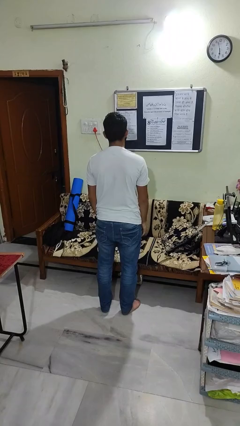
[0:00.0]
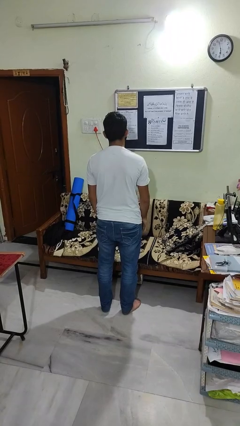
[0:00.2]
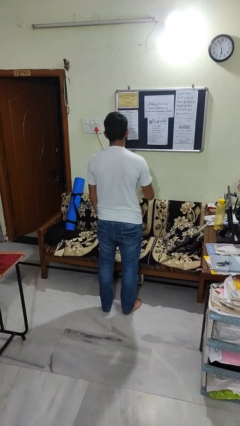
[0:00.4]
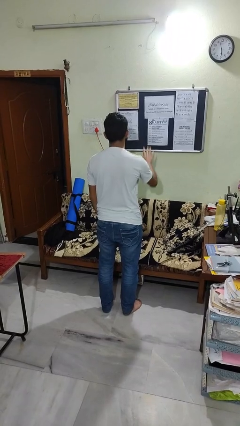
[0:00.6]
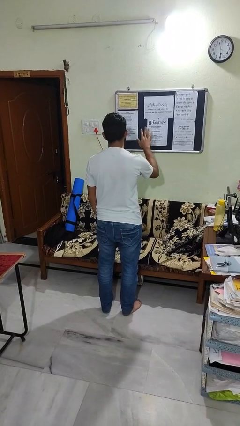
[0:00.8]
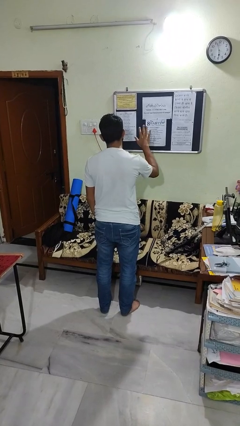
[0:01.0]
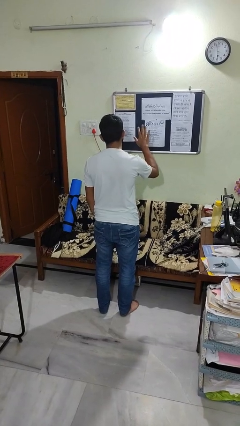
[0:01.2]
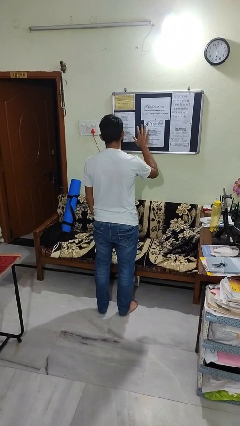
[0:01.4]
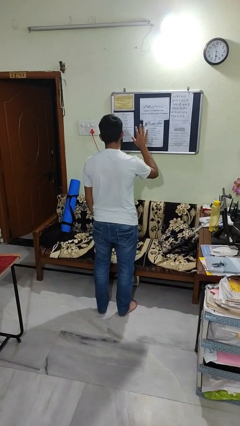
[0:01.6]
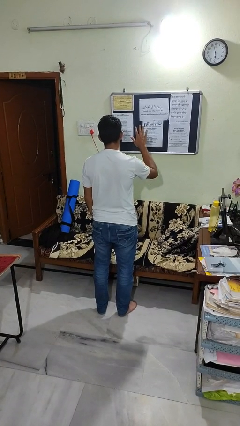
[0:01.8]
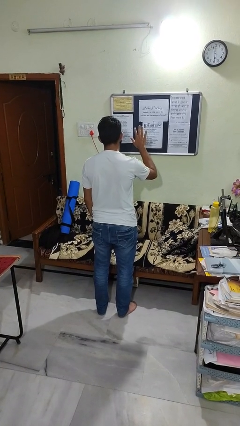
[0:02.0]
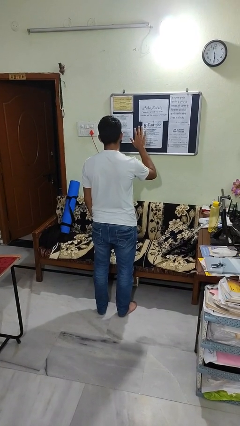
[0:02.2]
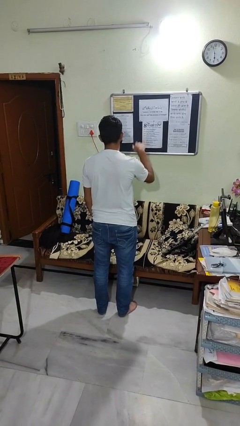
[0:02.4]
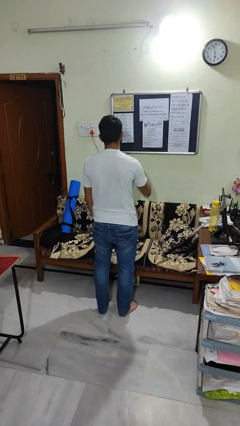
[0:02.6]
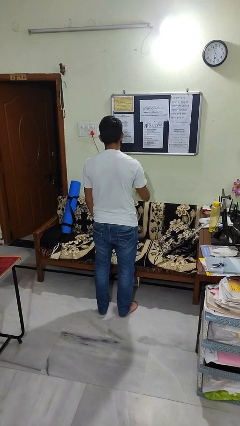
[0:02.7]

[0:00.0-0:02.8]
person gestures number five

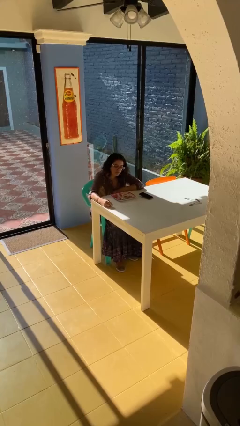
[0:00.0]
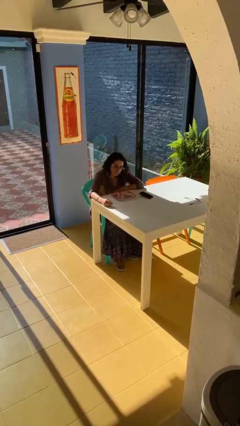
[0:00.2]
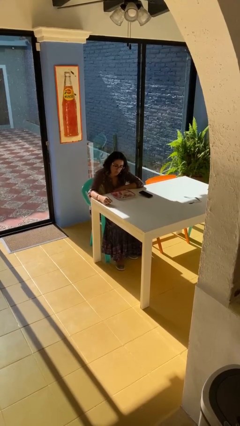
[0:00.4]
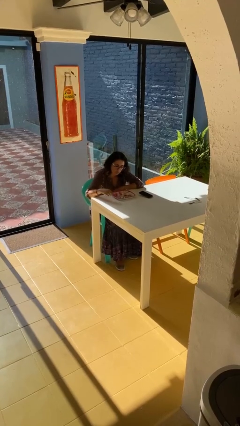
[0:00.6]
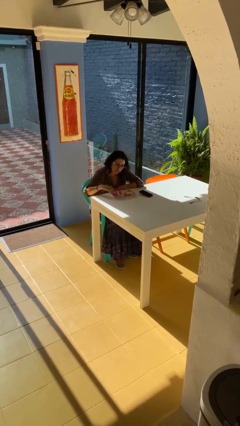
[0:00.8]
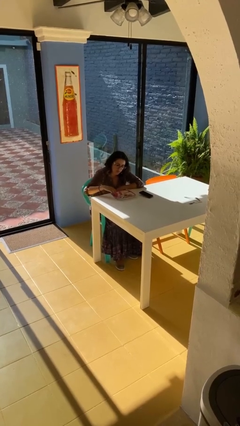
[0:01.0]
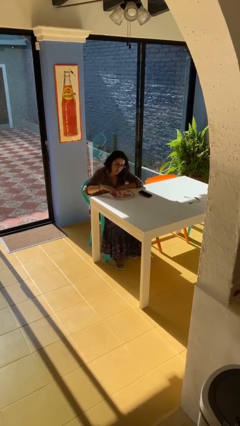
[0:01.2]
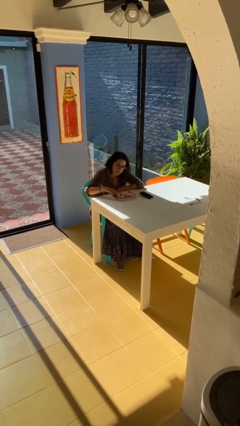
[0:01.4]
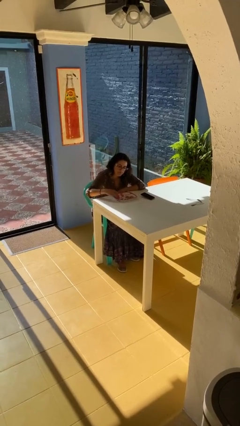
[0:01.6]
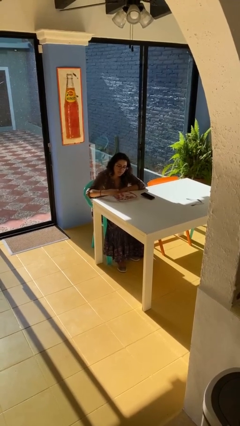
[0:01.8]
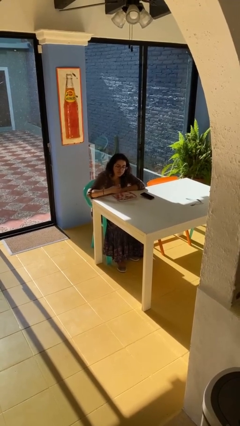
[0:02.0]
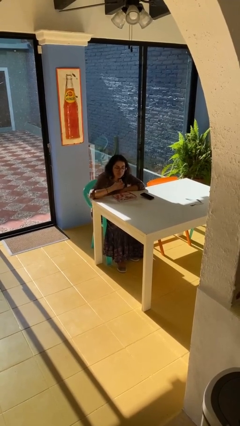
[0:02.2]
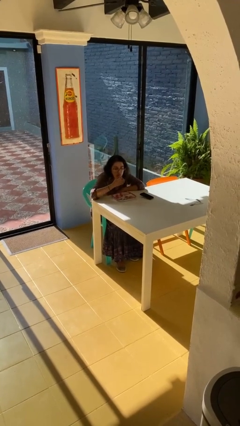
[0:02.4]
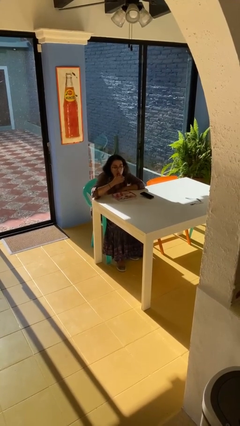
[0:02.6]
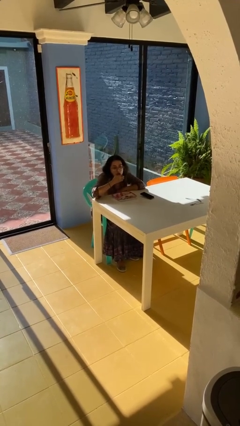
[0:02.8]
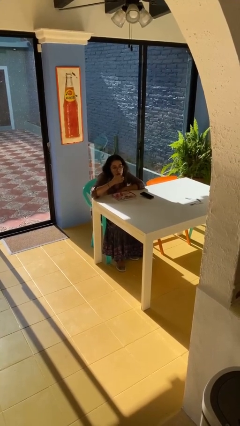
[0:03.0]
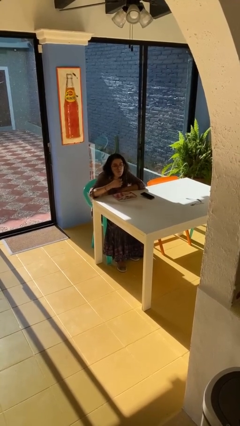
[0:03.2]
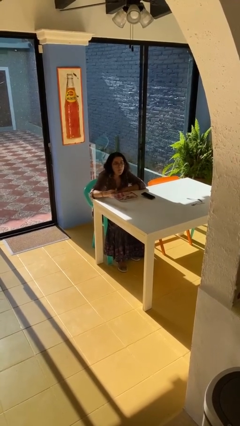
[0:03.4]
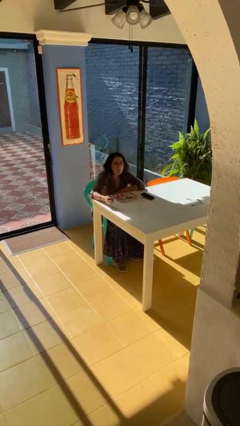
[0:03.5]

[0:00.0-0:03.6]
person eats with hands

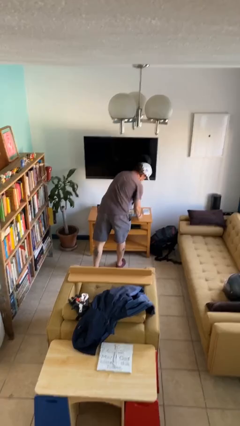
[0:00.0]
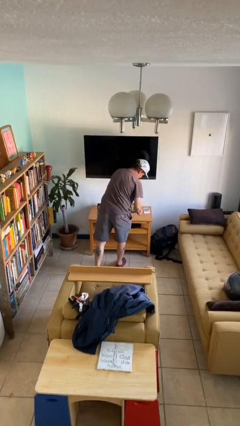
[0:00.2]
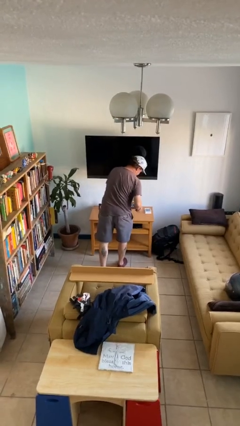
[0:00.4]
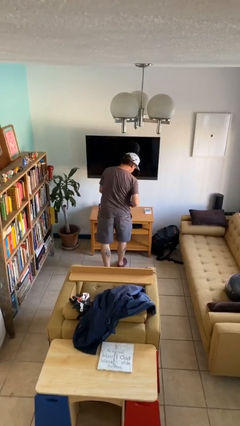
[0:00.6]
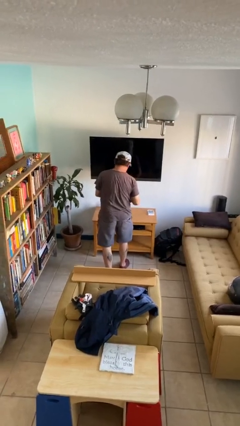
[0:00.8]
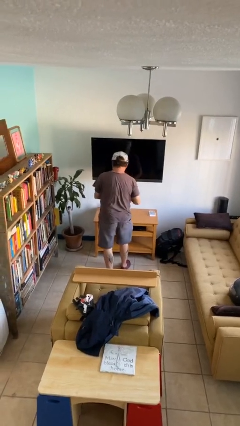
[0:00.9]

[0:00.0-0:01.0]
person picks up object from table

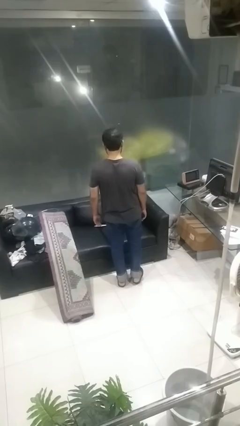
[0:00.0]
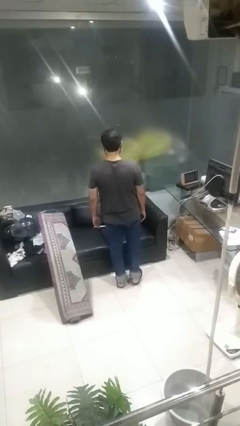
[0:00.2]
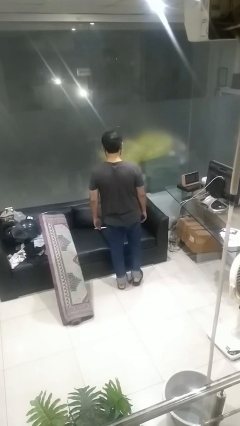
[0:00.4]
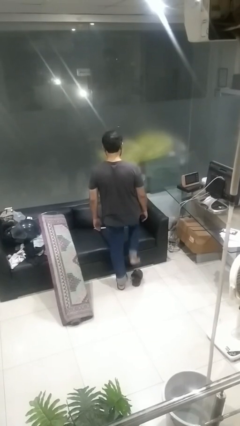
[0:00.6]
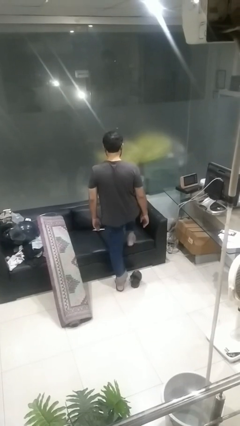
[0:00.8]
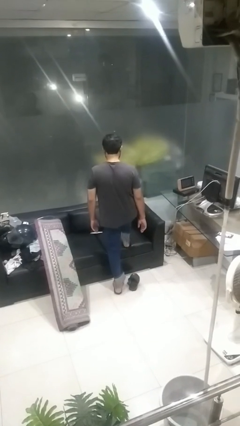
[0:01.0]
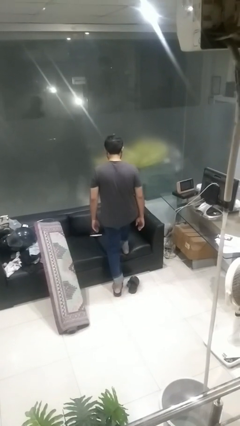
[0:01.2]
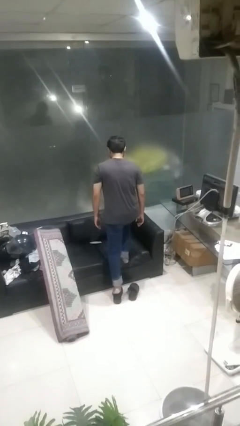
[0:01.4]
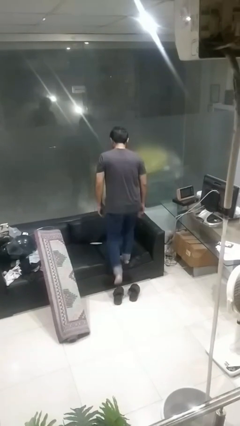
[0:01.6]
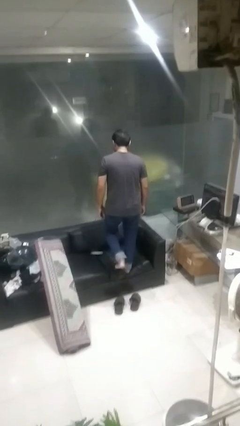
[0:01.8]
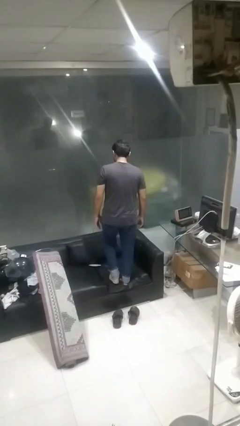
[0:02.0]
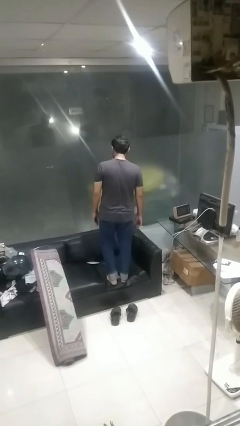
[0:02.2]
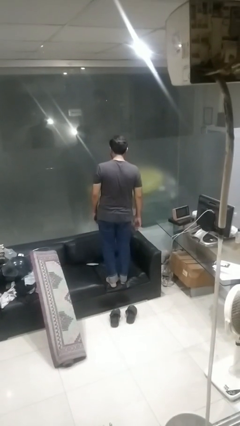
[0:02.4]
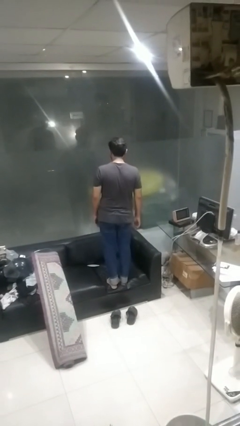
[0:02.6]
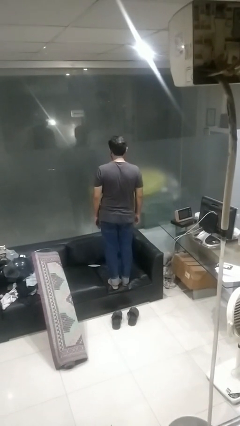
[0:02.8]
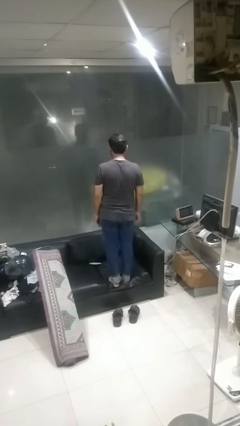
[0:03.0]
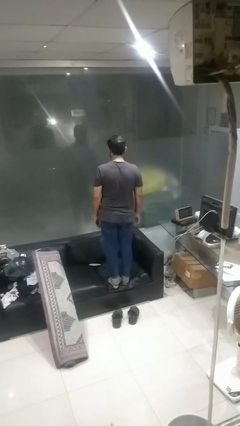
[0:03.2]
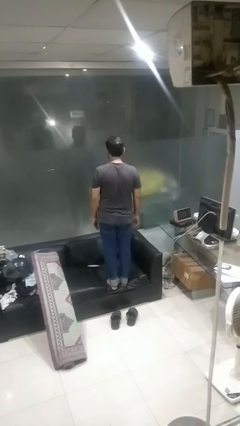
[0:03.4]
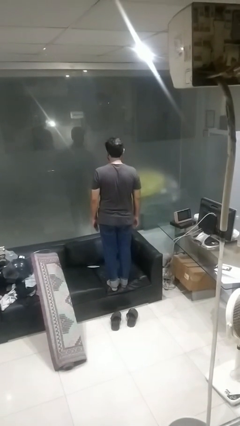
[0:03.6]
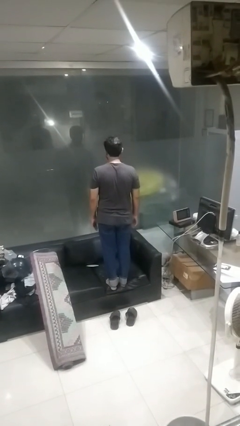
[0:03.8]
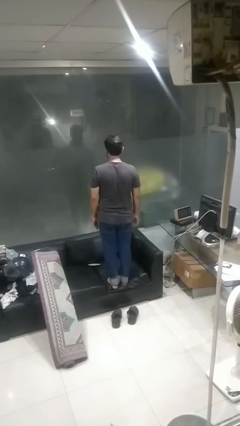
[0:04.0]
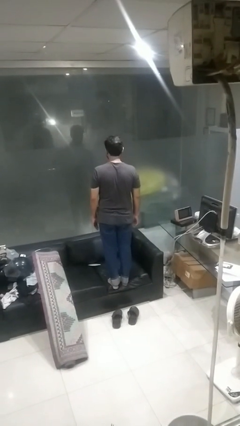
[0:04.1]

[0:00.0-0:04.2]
person climbs on couch

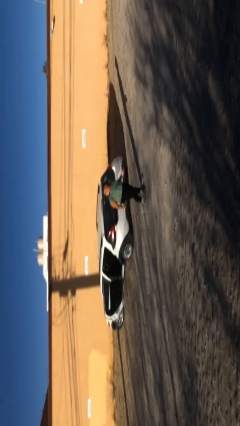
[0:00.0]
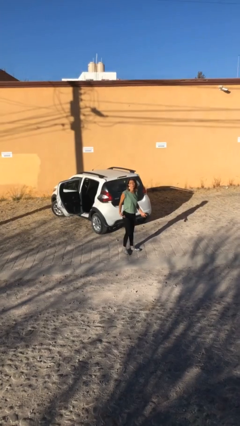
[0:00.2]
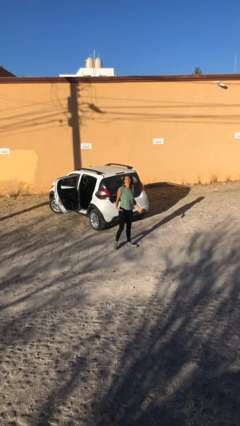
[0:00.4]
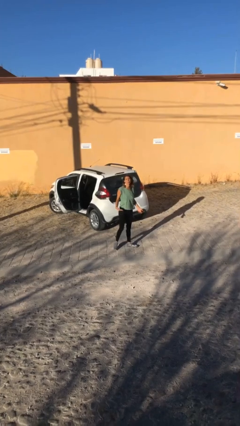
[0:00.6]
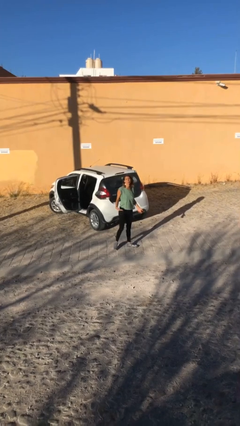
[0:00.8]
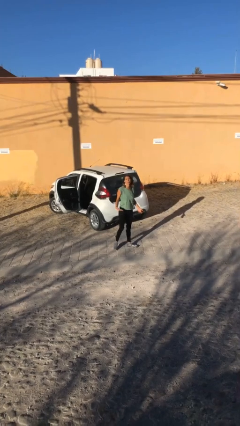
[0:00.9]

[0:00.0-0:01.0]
person exits car

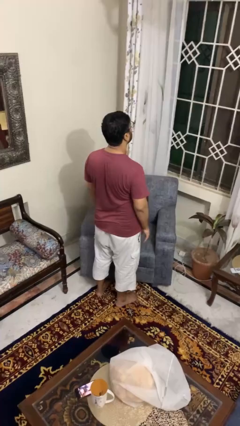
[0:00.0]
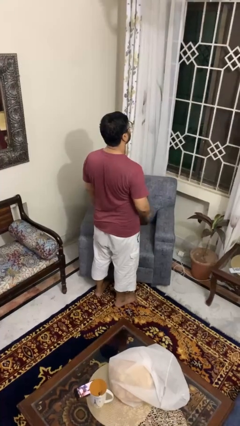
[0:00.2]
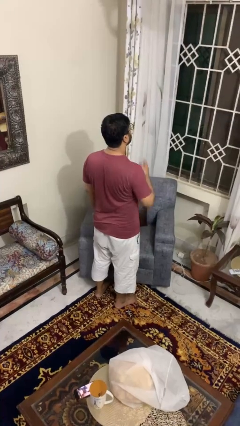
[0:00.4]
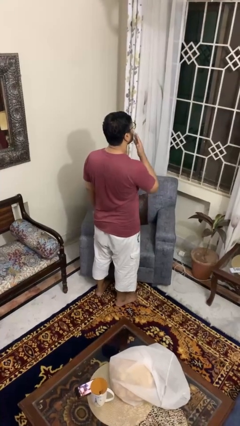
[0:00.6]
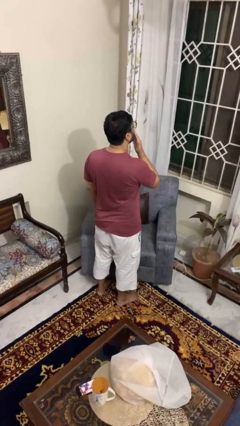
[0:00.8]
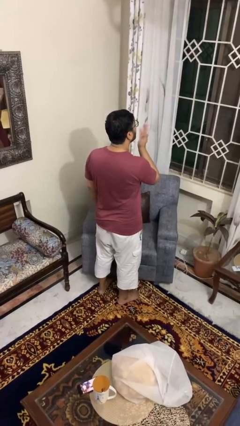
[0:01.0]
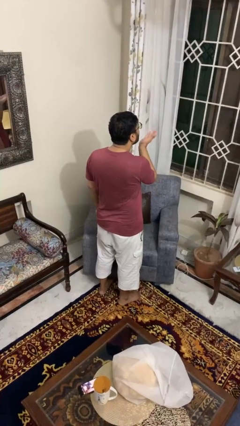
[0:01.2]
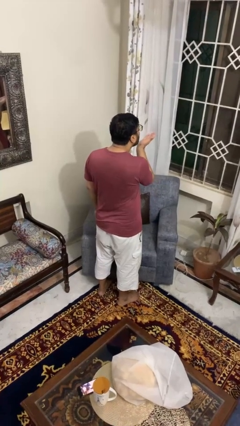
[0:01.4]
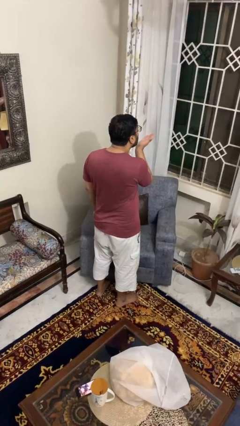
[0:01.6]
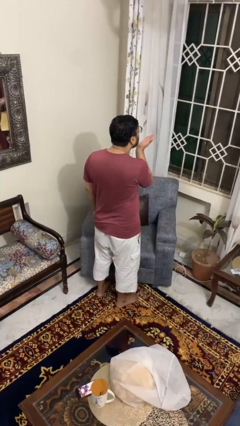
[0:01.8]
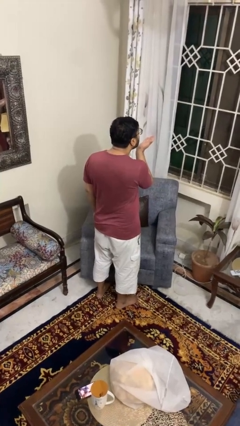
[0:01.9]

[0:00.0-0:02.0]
person gestures blow kiss

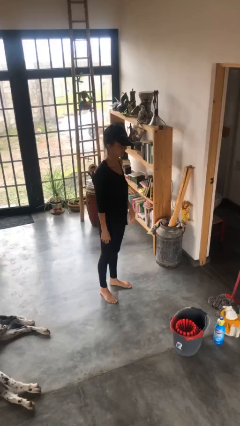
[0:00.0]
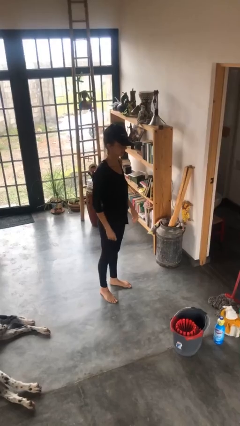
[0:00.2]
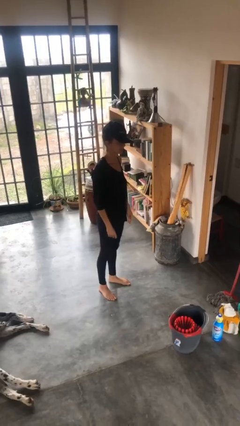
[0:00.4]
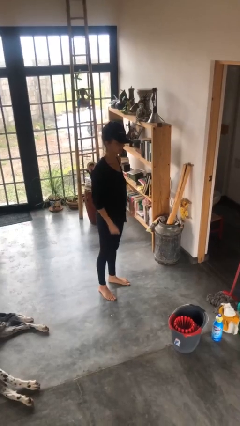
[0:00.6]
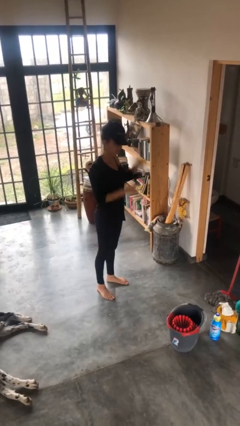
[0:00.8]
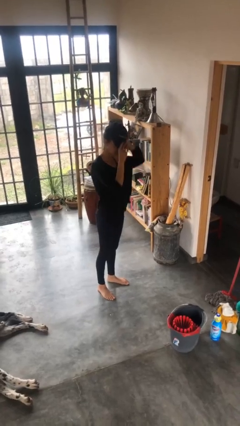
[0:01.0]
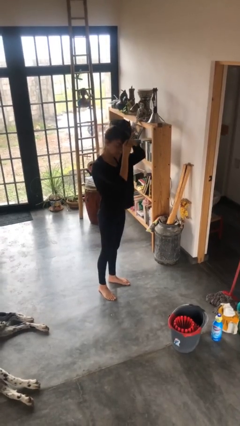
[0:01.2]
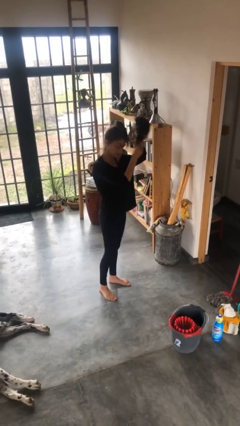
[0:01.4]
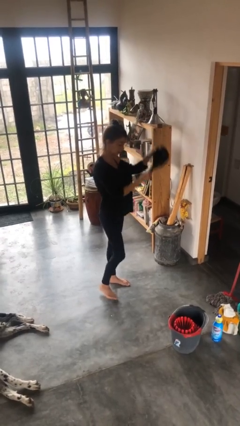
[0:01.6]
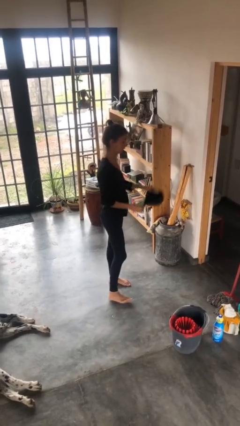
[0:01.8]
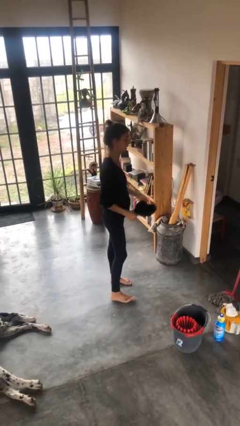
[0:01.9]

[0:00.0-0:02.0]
person takes off hat

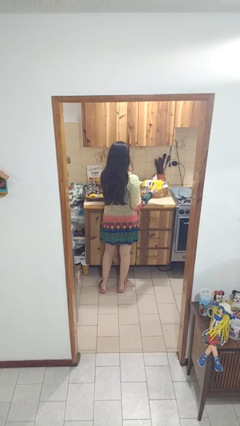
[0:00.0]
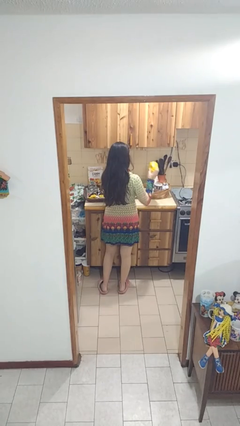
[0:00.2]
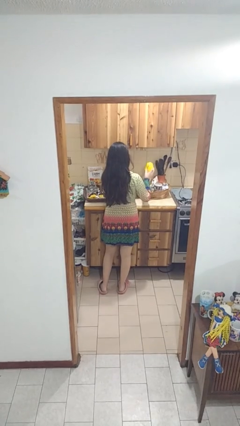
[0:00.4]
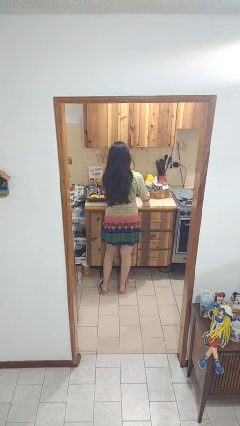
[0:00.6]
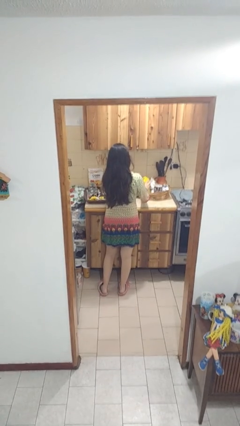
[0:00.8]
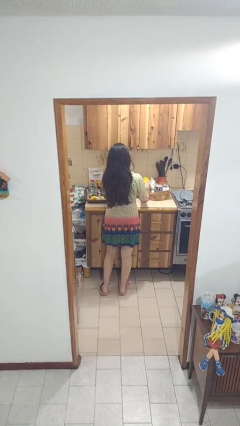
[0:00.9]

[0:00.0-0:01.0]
person puts object into bag
